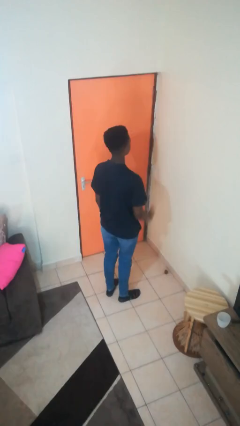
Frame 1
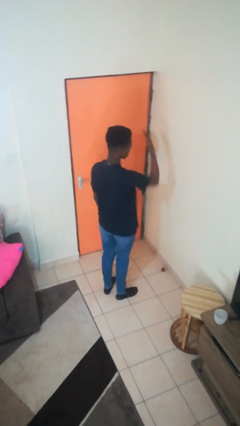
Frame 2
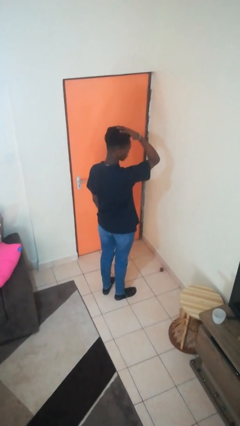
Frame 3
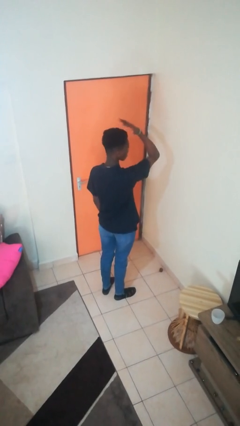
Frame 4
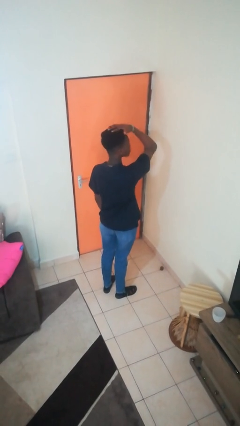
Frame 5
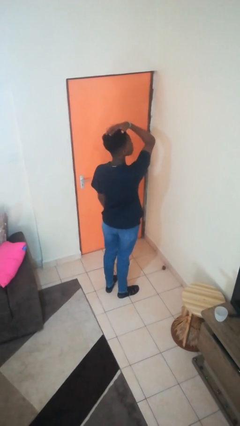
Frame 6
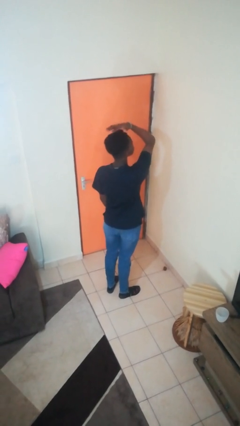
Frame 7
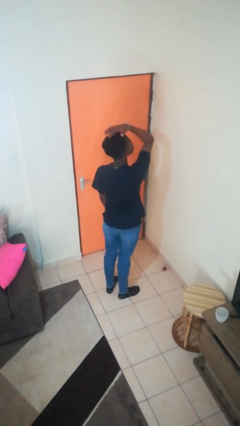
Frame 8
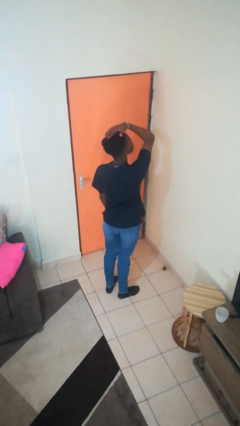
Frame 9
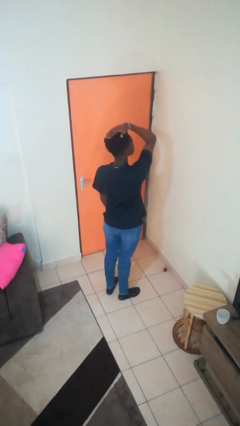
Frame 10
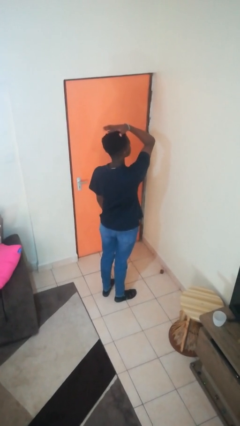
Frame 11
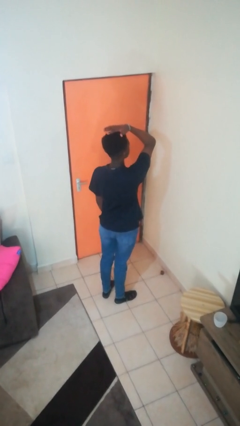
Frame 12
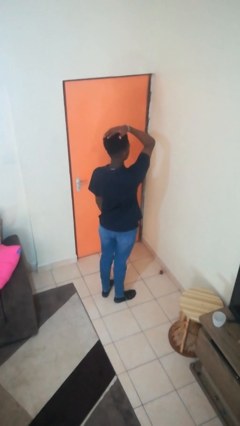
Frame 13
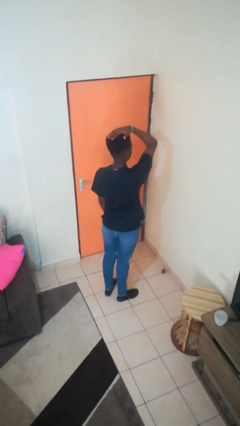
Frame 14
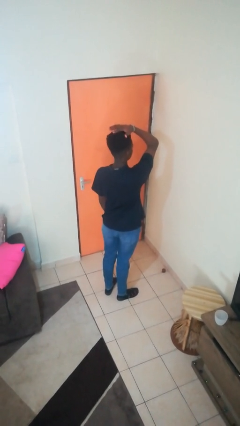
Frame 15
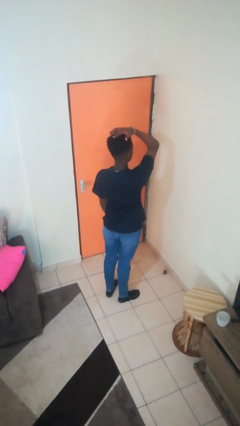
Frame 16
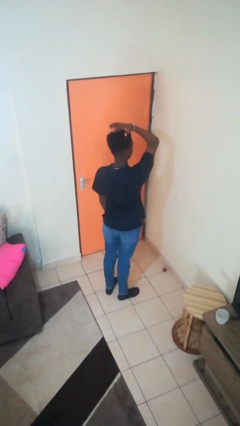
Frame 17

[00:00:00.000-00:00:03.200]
person pats head

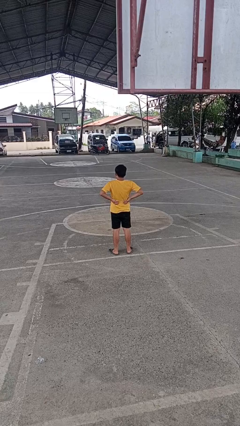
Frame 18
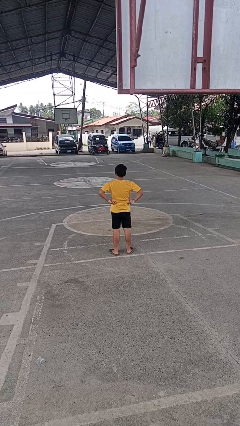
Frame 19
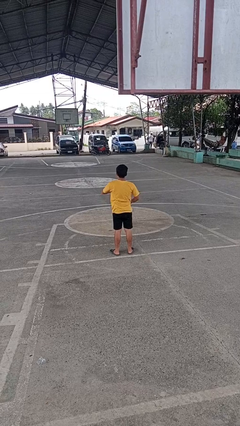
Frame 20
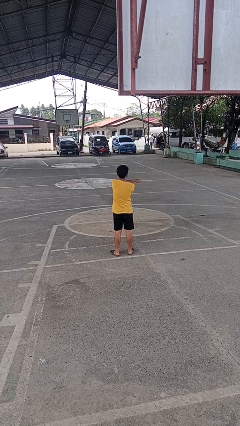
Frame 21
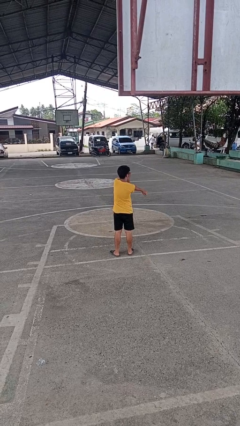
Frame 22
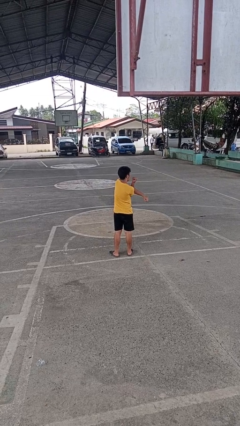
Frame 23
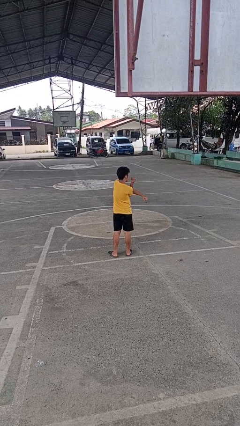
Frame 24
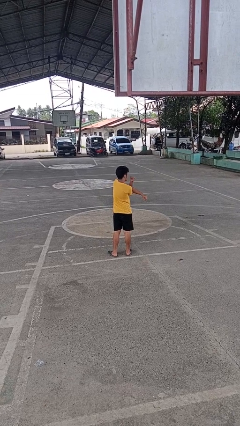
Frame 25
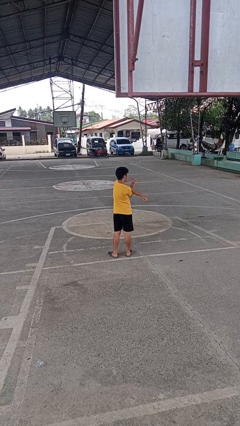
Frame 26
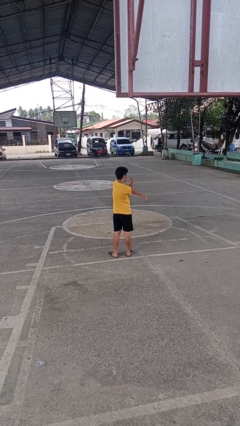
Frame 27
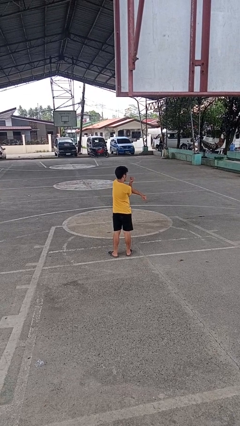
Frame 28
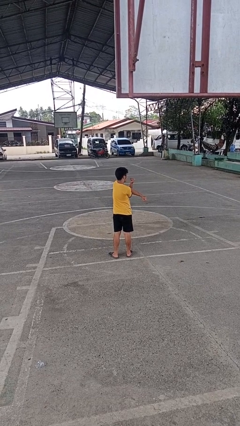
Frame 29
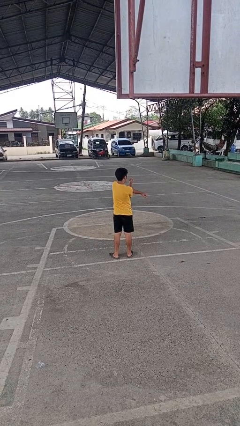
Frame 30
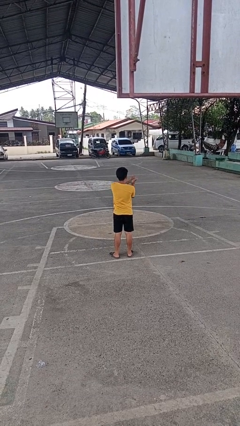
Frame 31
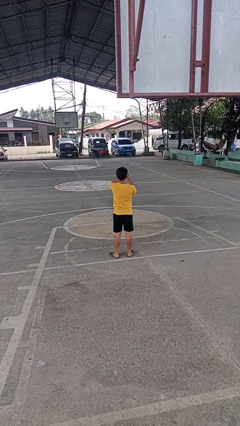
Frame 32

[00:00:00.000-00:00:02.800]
person stretches arms to side

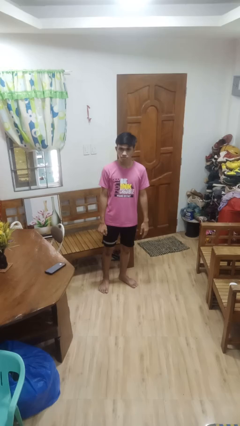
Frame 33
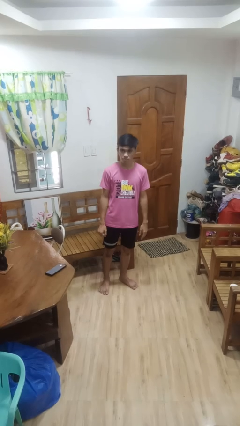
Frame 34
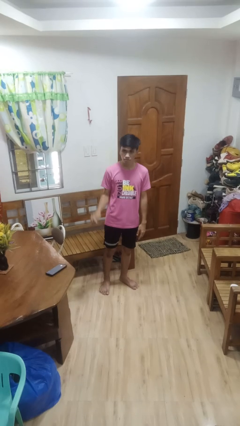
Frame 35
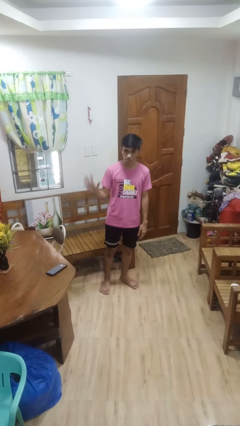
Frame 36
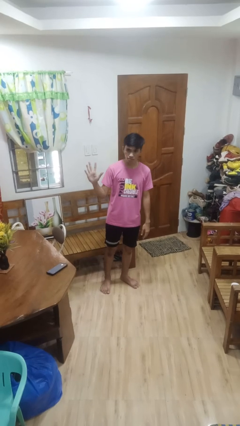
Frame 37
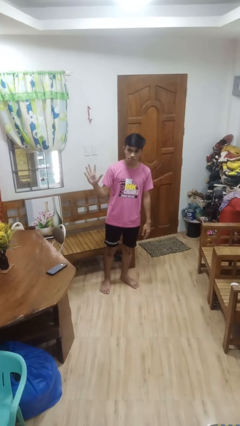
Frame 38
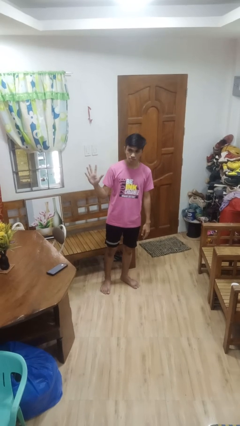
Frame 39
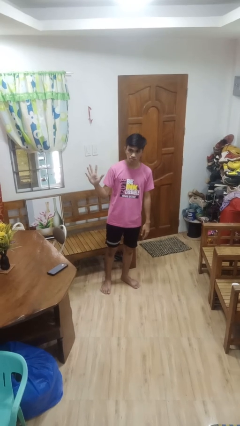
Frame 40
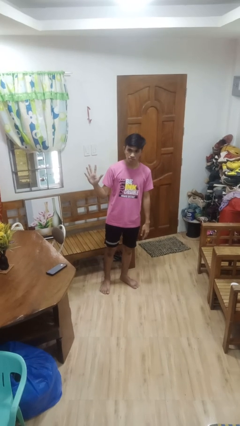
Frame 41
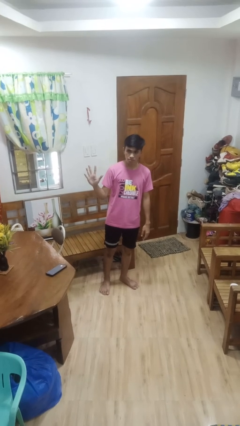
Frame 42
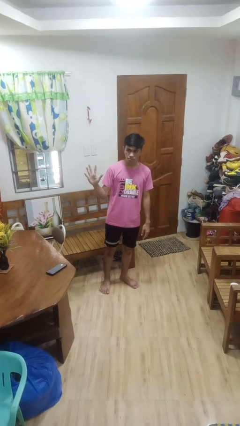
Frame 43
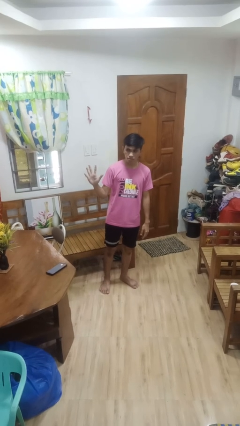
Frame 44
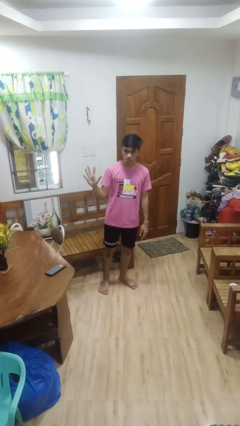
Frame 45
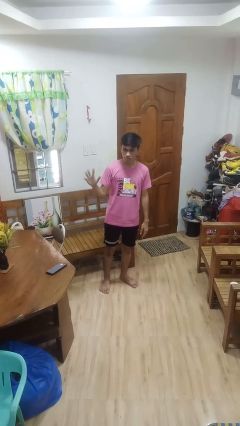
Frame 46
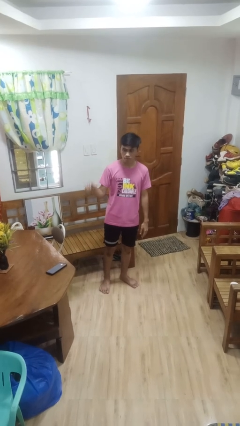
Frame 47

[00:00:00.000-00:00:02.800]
person gestures number five

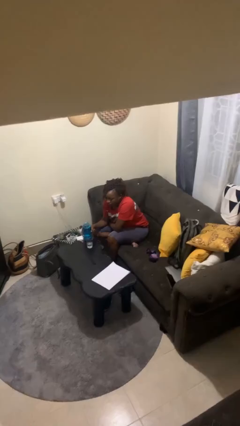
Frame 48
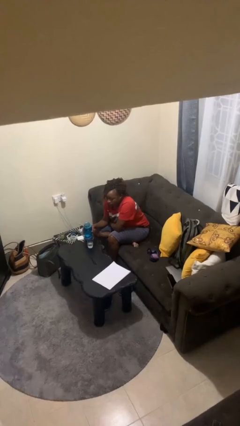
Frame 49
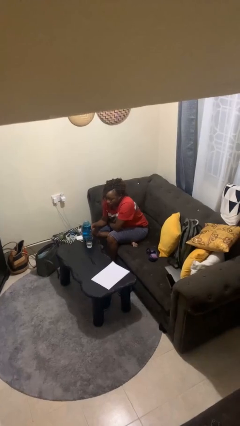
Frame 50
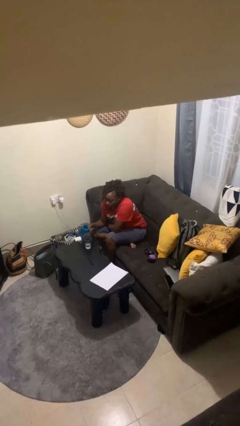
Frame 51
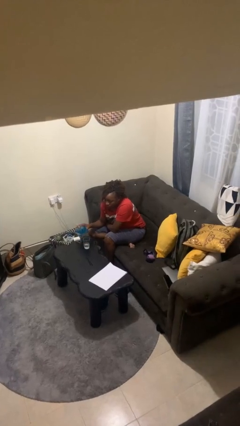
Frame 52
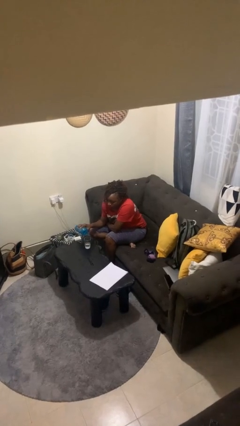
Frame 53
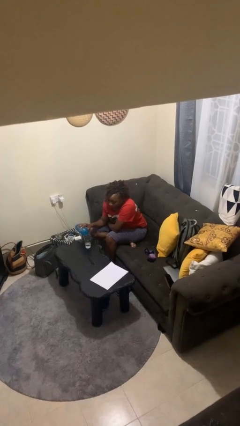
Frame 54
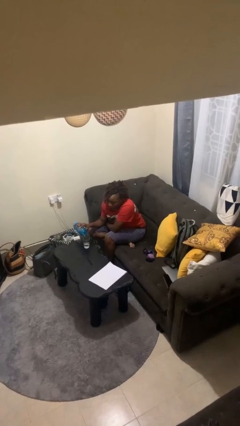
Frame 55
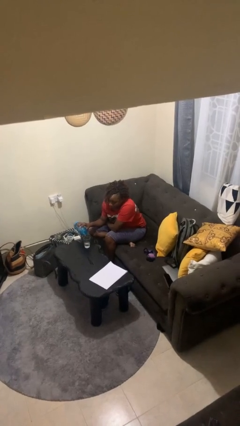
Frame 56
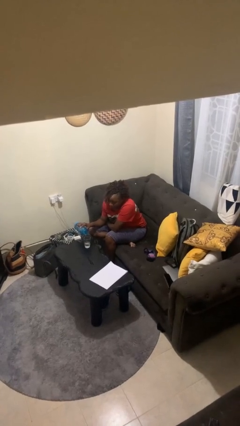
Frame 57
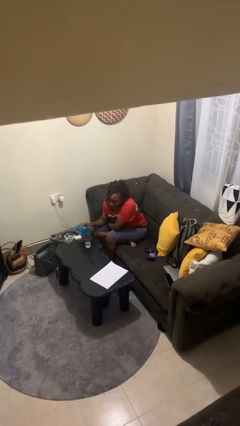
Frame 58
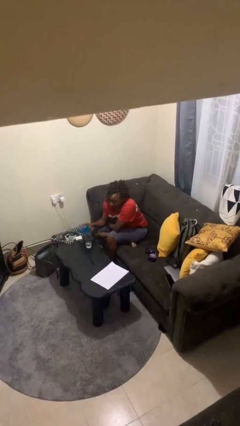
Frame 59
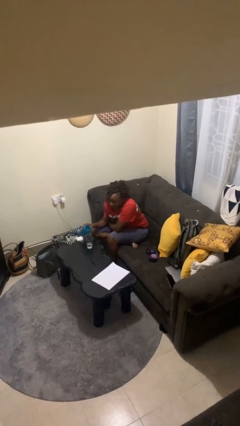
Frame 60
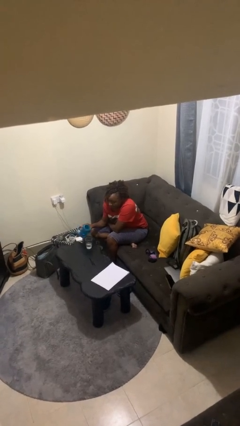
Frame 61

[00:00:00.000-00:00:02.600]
person pours liquid into cup

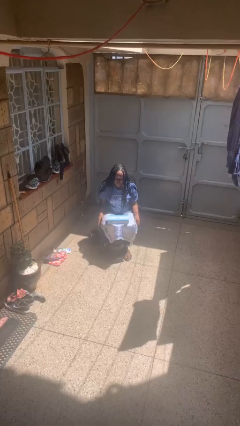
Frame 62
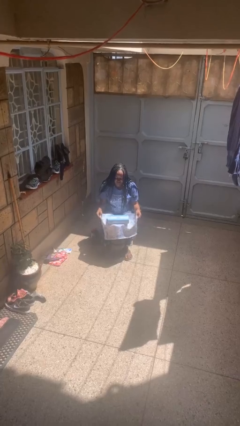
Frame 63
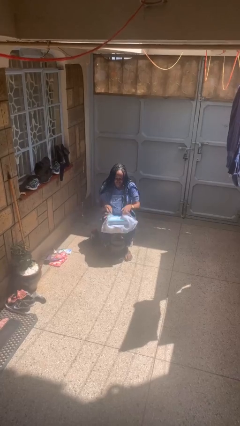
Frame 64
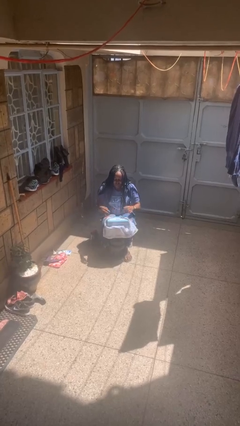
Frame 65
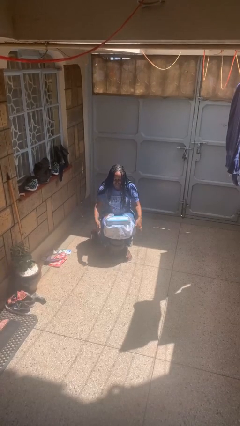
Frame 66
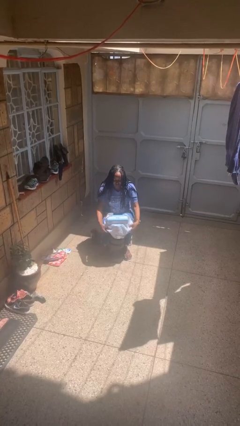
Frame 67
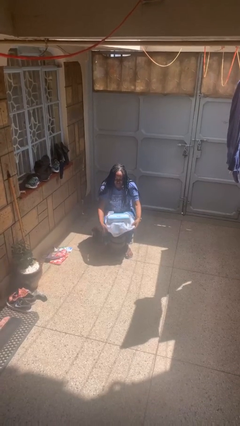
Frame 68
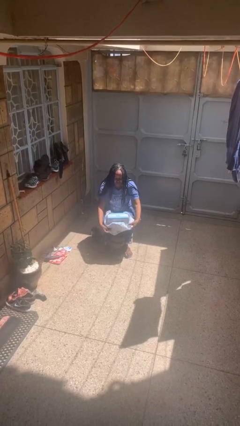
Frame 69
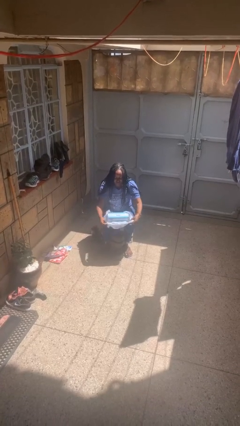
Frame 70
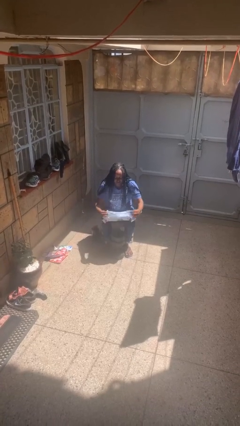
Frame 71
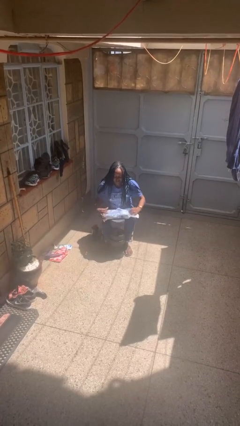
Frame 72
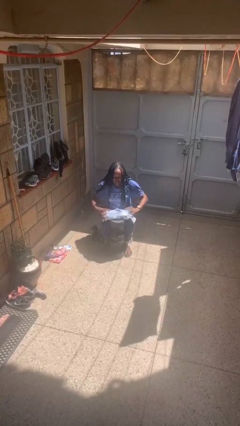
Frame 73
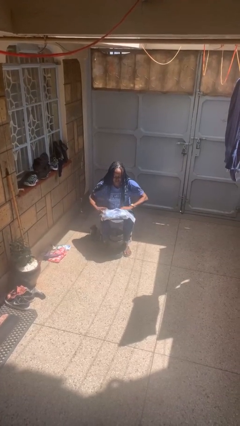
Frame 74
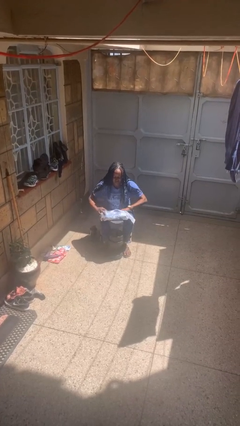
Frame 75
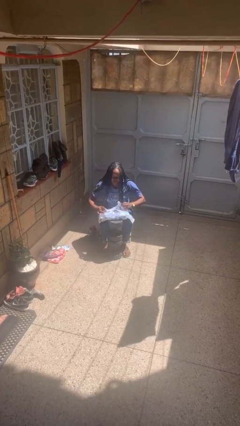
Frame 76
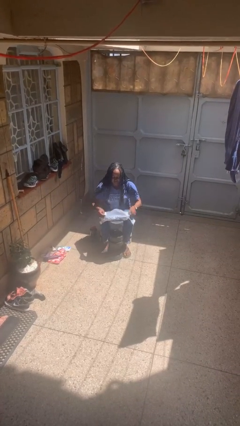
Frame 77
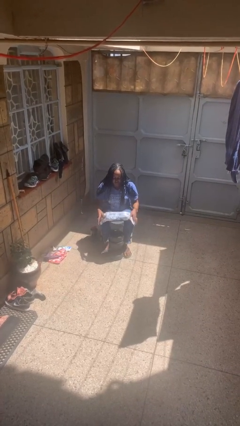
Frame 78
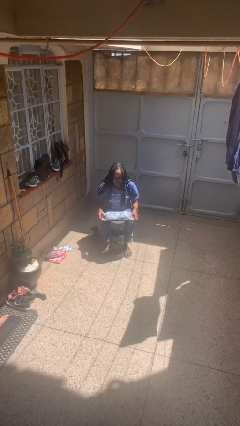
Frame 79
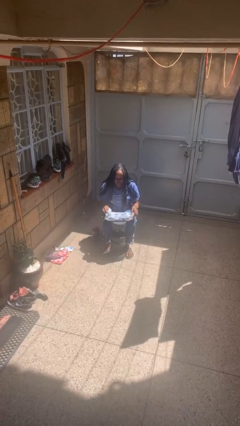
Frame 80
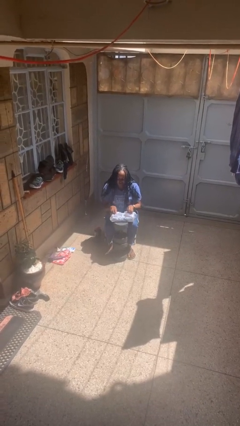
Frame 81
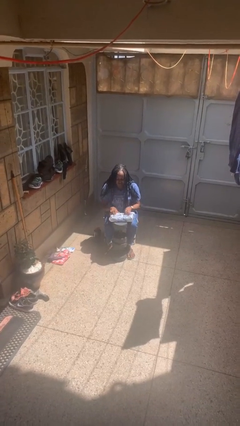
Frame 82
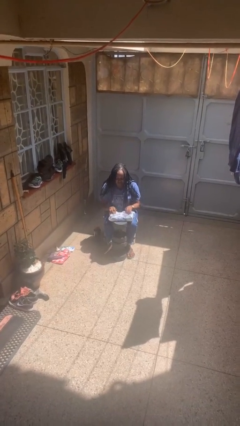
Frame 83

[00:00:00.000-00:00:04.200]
person wraps box

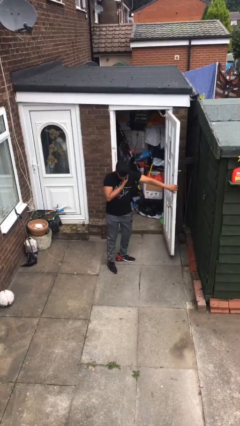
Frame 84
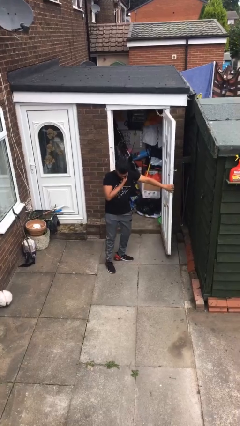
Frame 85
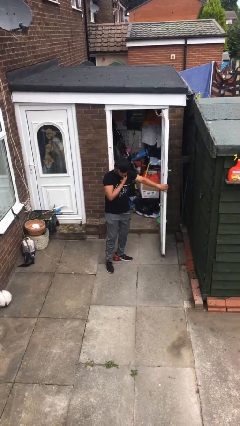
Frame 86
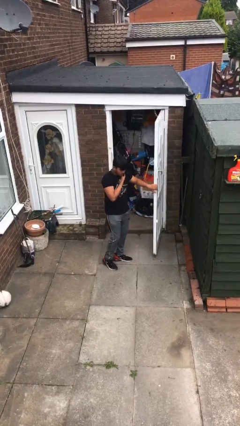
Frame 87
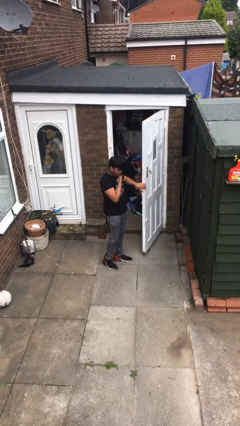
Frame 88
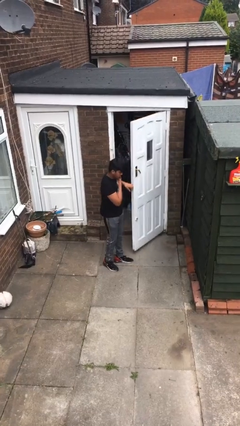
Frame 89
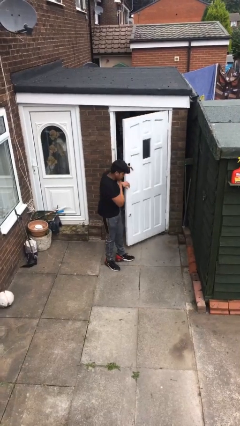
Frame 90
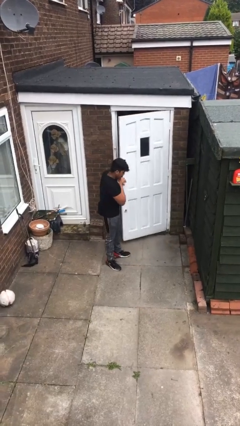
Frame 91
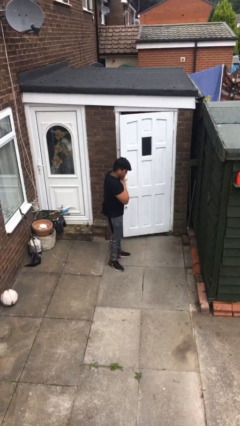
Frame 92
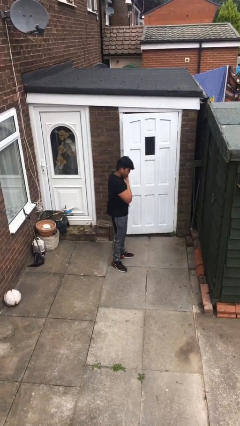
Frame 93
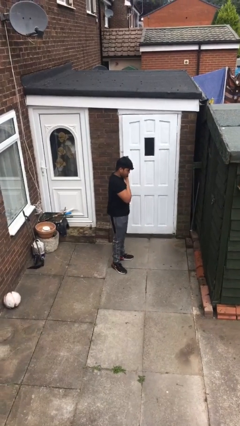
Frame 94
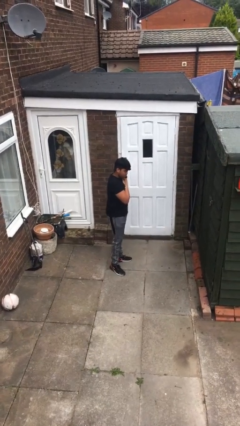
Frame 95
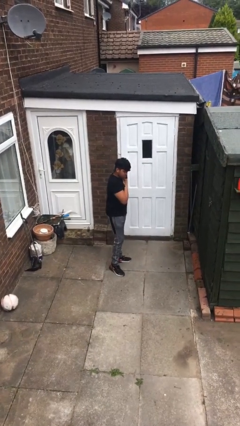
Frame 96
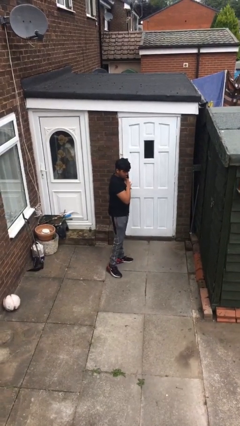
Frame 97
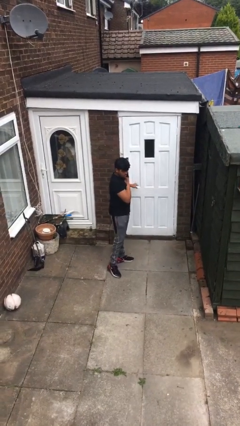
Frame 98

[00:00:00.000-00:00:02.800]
person closes facility door
